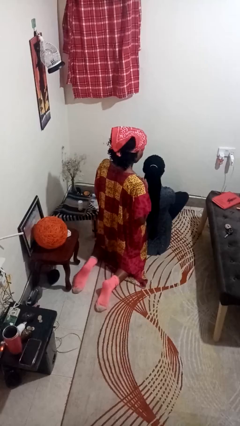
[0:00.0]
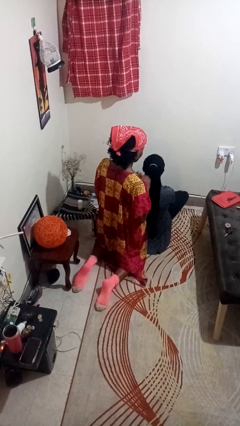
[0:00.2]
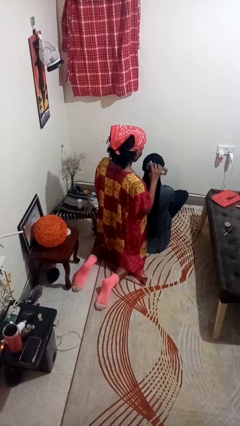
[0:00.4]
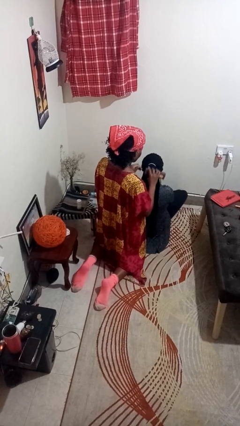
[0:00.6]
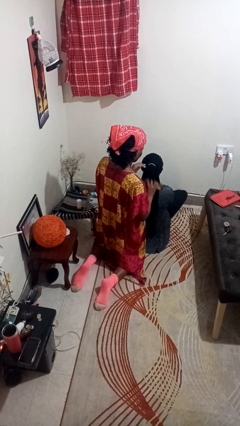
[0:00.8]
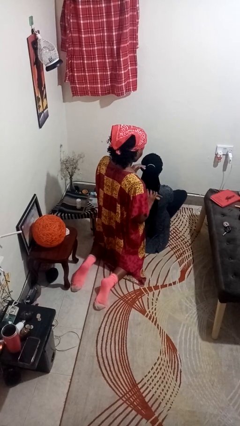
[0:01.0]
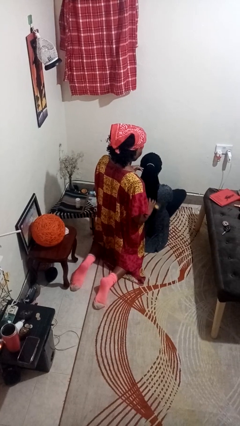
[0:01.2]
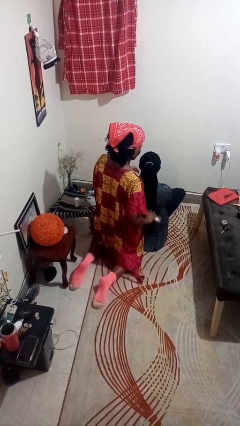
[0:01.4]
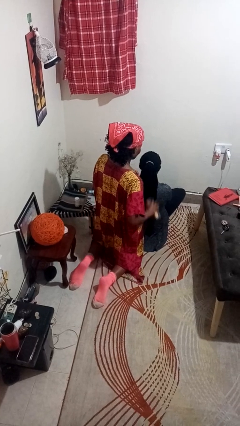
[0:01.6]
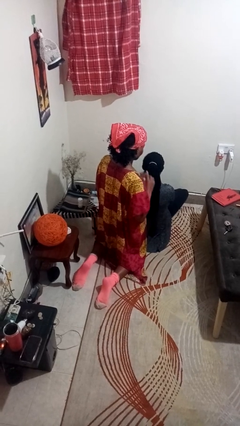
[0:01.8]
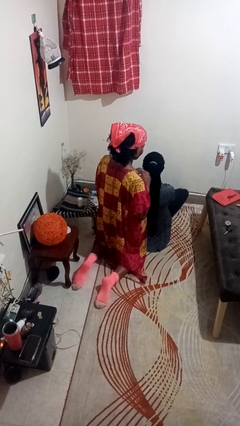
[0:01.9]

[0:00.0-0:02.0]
person brushes hair of person

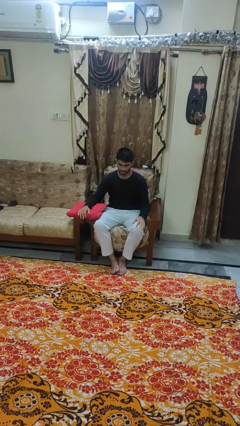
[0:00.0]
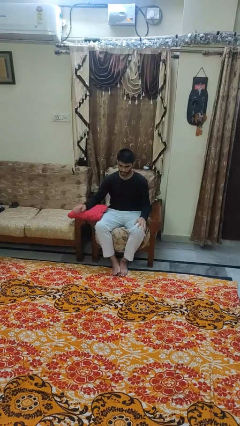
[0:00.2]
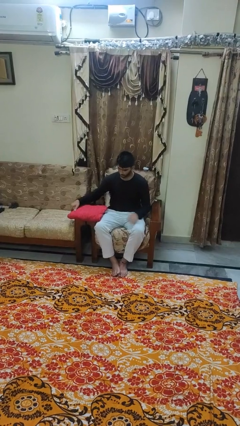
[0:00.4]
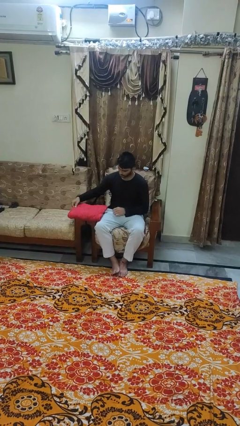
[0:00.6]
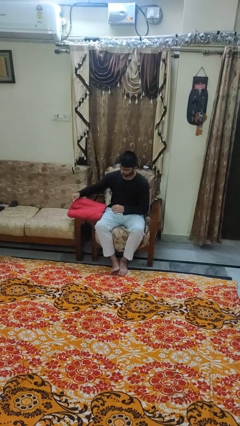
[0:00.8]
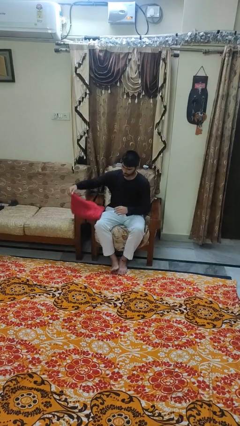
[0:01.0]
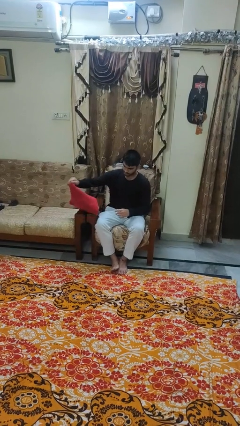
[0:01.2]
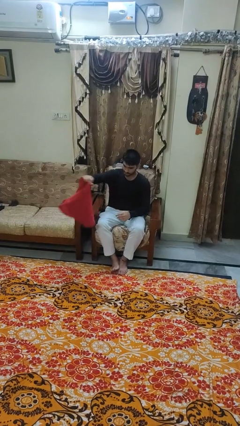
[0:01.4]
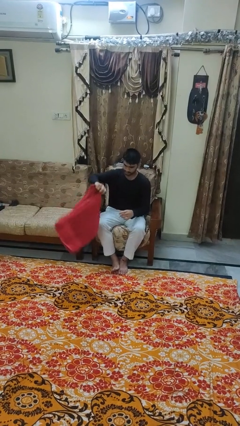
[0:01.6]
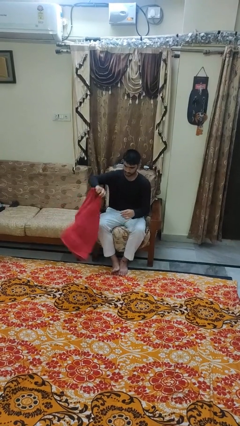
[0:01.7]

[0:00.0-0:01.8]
person folds towel

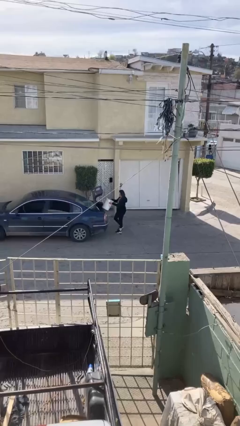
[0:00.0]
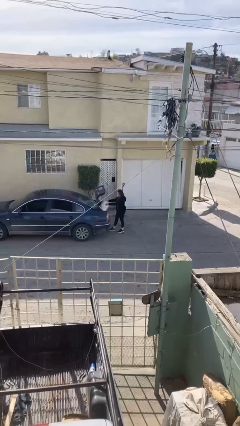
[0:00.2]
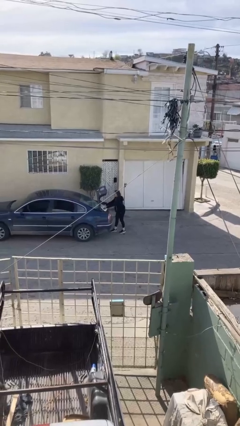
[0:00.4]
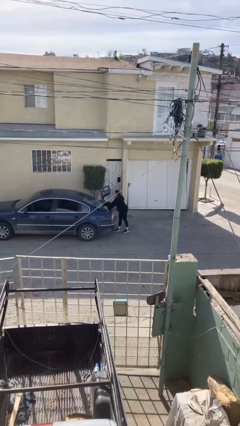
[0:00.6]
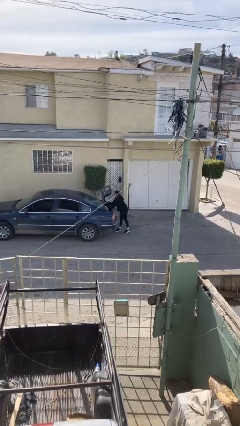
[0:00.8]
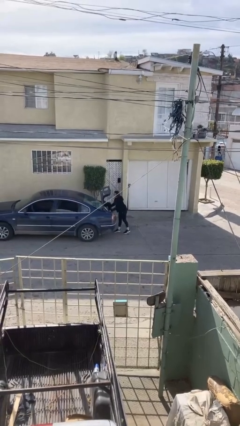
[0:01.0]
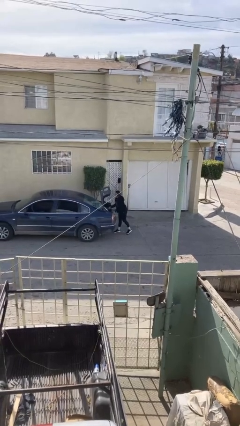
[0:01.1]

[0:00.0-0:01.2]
person loads car

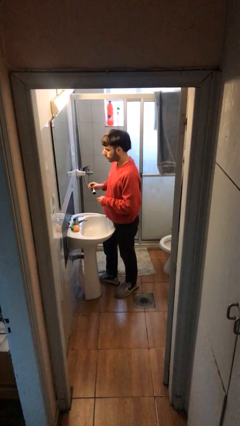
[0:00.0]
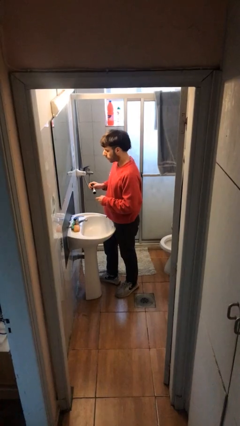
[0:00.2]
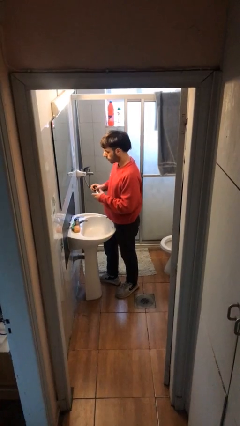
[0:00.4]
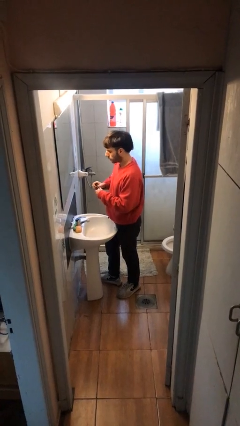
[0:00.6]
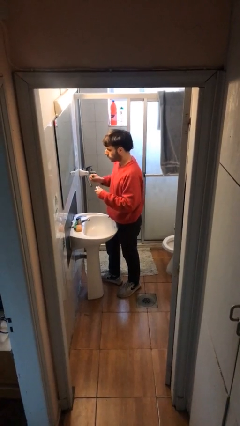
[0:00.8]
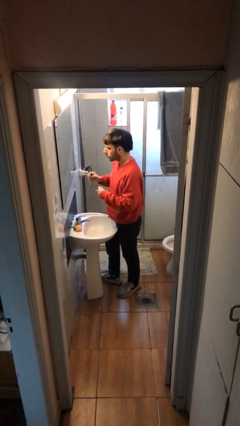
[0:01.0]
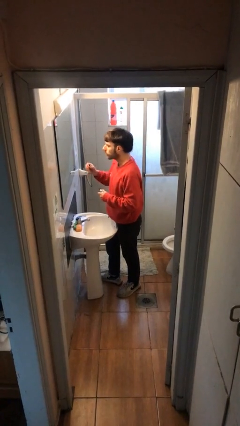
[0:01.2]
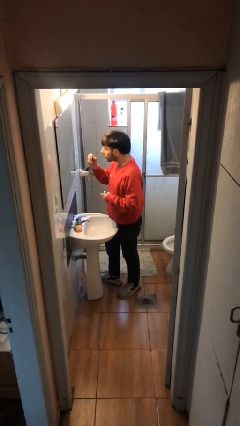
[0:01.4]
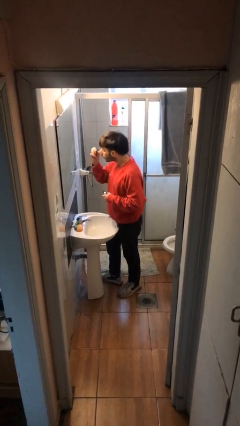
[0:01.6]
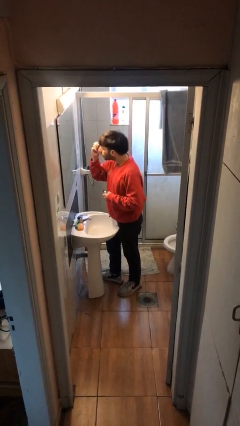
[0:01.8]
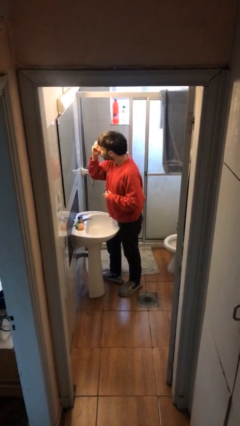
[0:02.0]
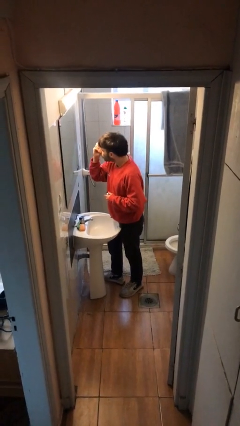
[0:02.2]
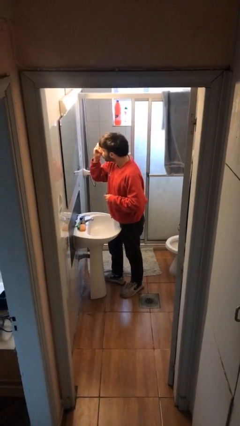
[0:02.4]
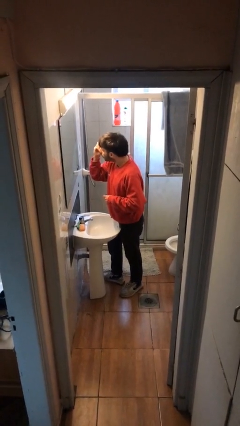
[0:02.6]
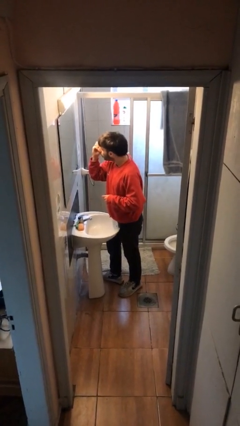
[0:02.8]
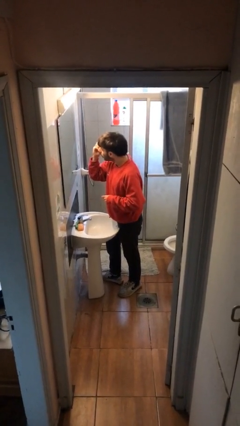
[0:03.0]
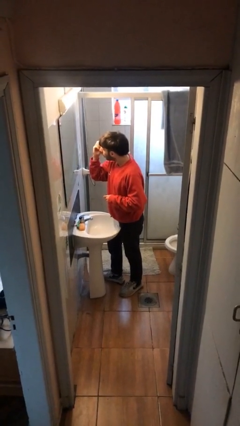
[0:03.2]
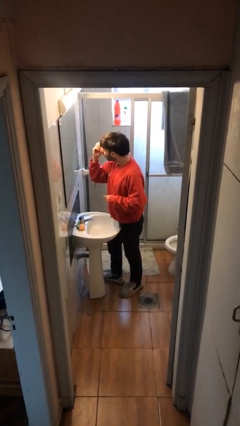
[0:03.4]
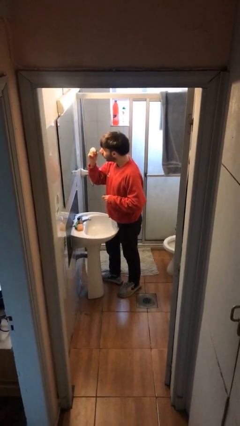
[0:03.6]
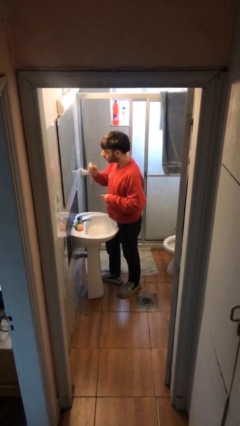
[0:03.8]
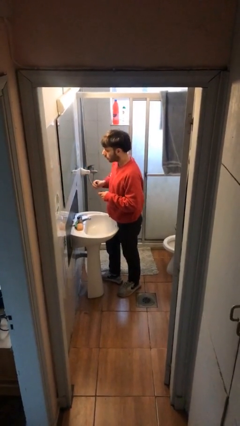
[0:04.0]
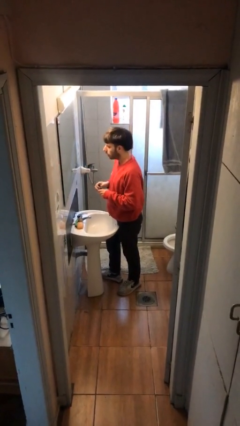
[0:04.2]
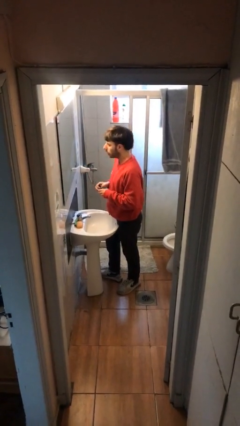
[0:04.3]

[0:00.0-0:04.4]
person applies eye makeup

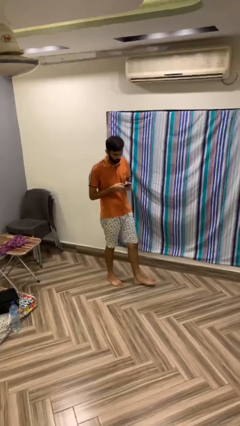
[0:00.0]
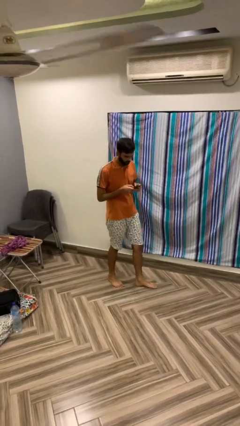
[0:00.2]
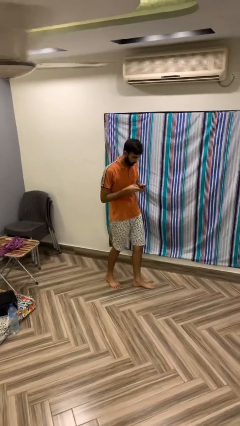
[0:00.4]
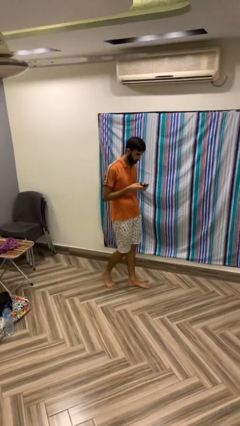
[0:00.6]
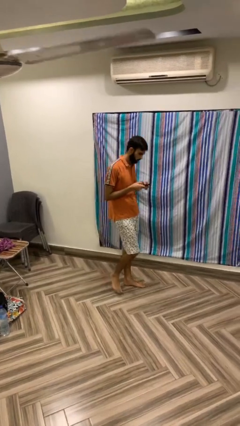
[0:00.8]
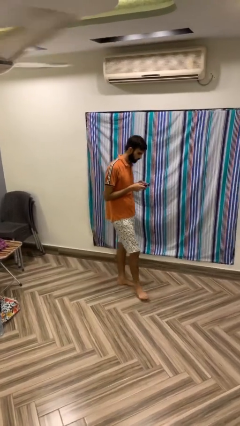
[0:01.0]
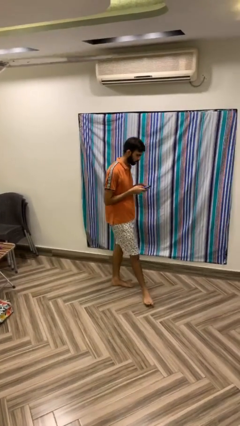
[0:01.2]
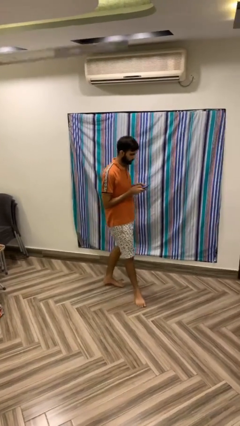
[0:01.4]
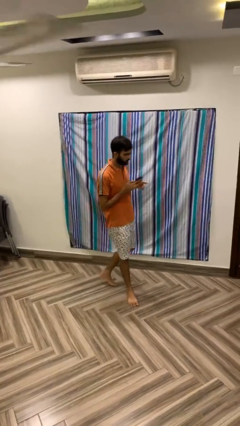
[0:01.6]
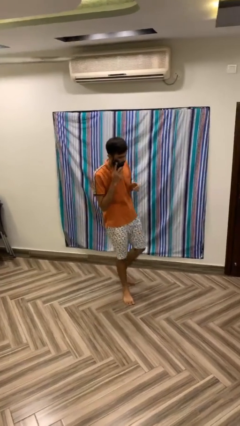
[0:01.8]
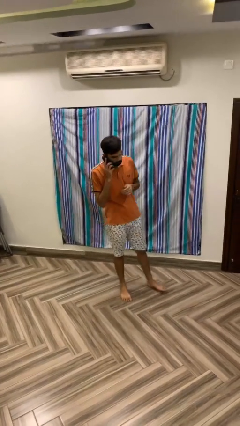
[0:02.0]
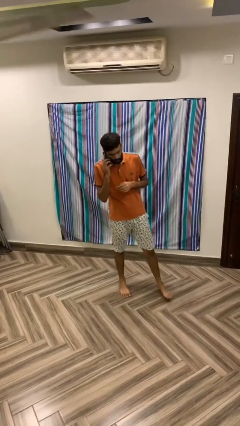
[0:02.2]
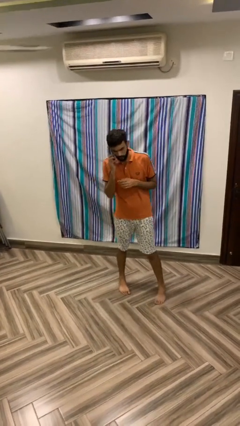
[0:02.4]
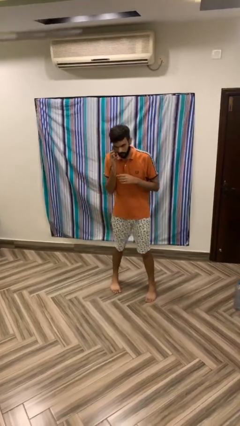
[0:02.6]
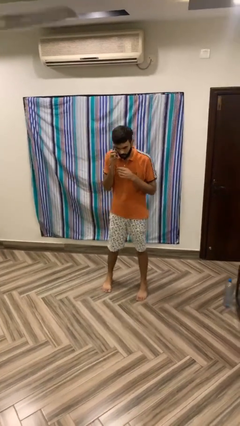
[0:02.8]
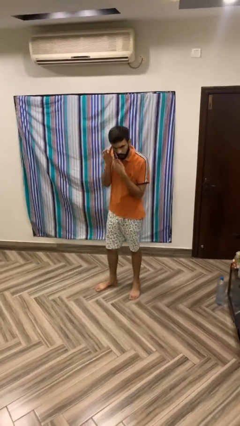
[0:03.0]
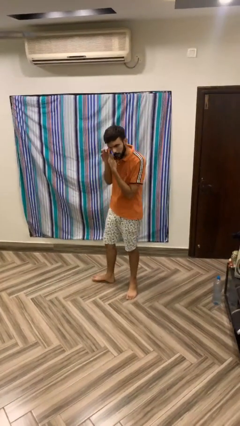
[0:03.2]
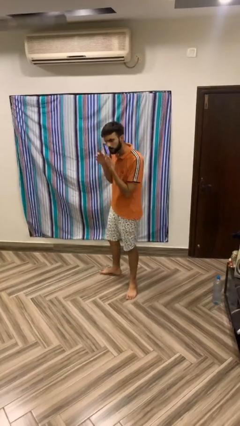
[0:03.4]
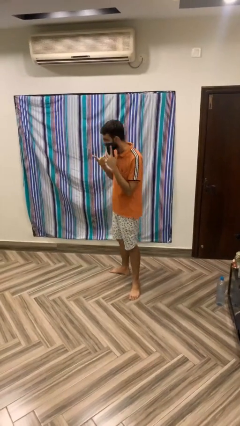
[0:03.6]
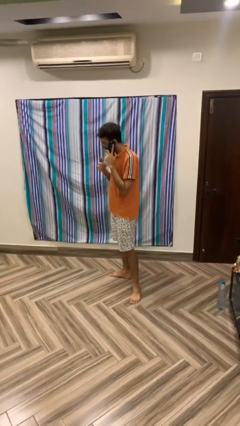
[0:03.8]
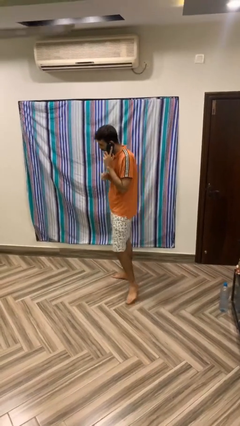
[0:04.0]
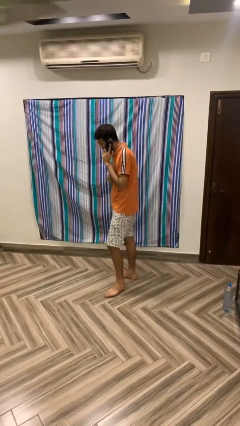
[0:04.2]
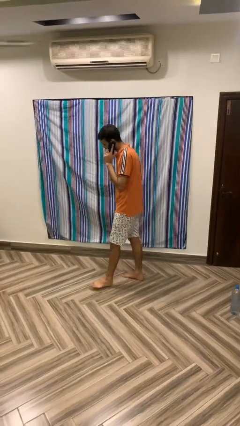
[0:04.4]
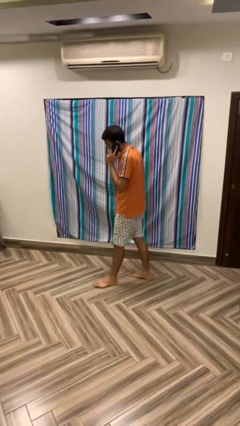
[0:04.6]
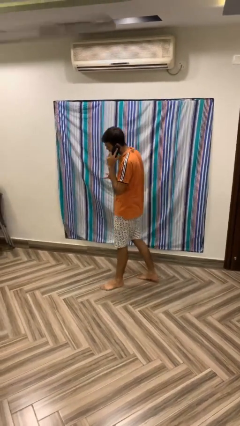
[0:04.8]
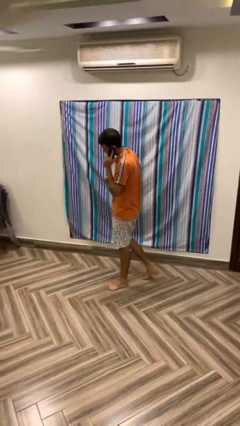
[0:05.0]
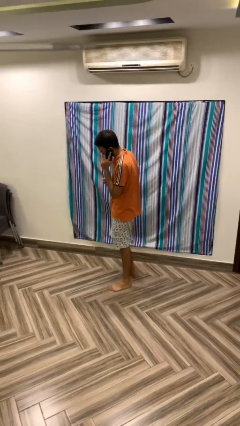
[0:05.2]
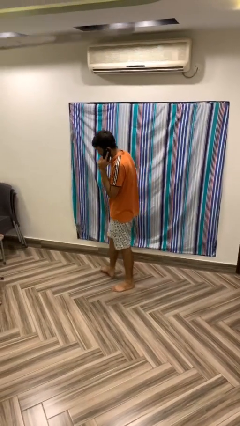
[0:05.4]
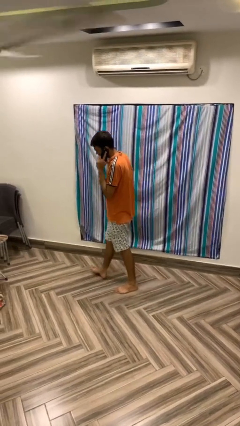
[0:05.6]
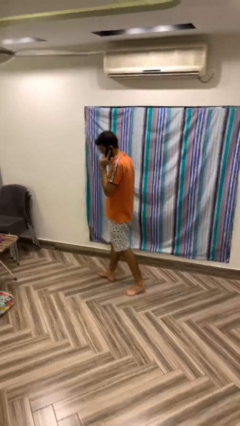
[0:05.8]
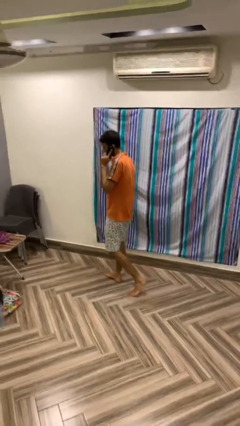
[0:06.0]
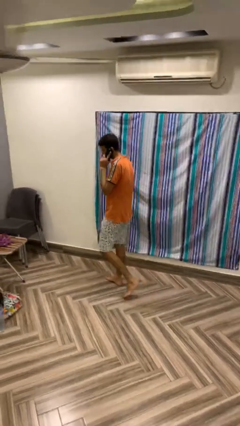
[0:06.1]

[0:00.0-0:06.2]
person talks on phone

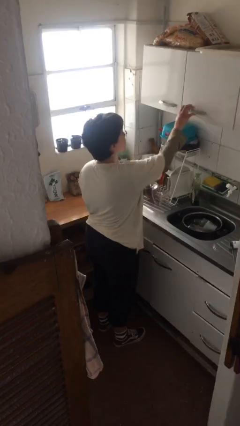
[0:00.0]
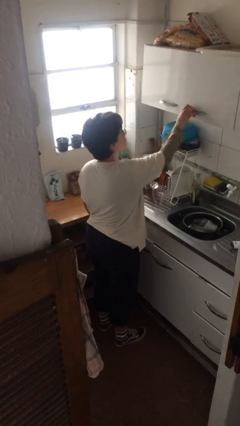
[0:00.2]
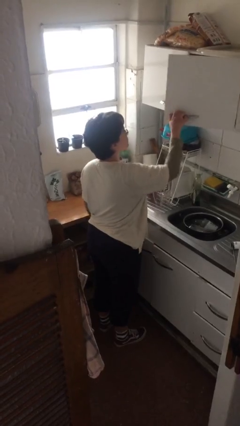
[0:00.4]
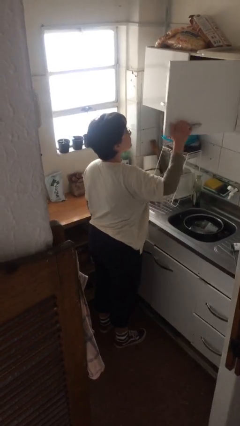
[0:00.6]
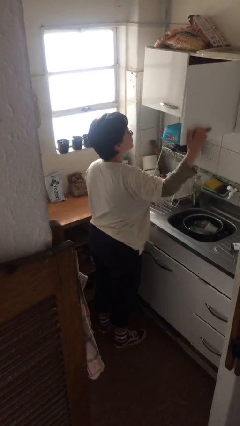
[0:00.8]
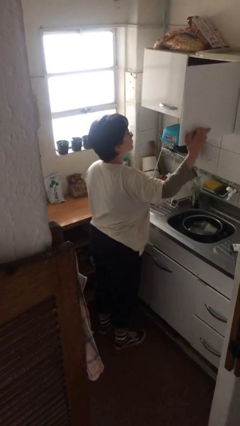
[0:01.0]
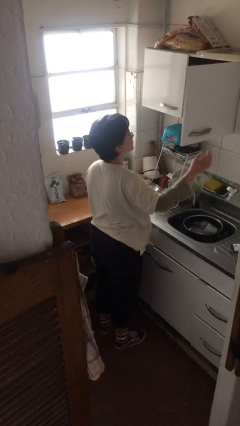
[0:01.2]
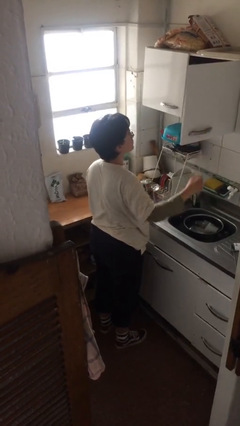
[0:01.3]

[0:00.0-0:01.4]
person opens cabinet
